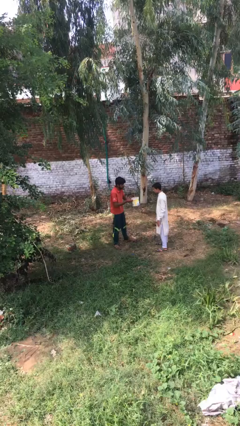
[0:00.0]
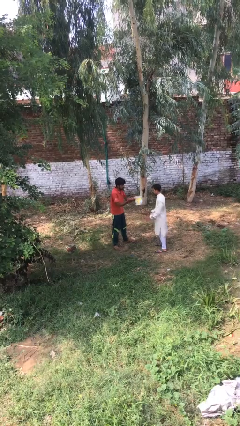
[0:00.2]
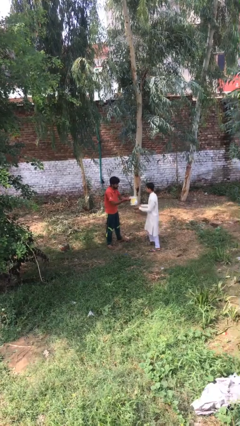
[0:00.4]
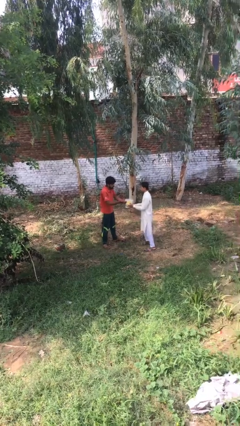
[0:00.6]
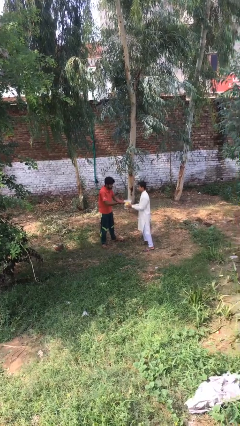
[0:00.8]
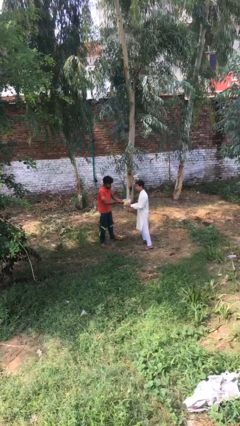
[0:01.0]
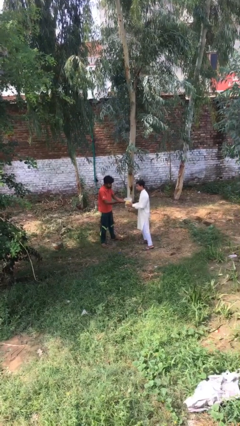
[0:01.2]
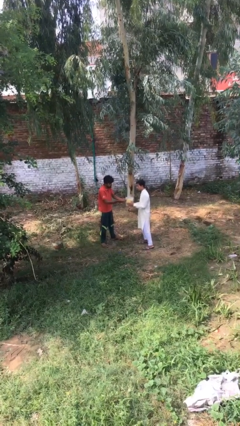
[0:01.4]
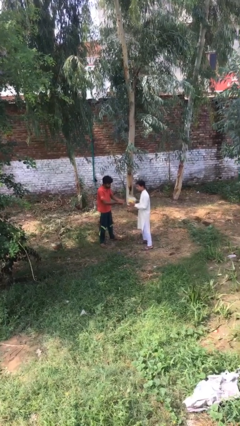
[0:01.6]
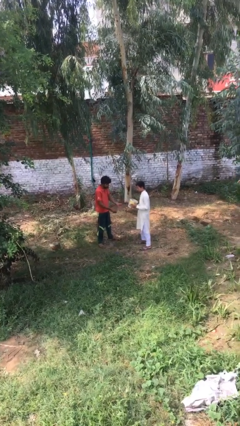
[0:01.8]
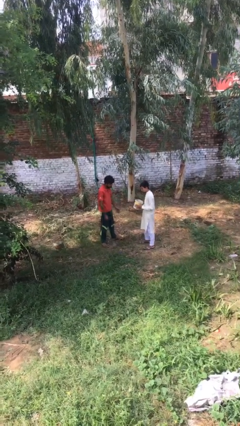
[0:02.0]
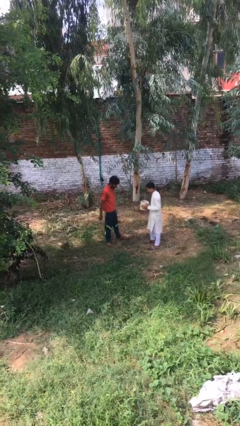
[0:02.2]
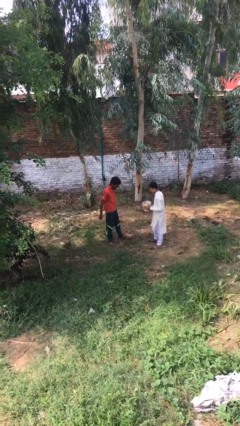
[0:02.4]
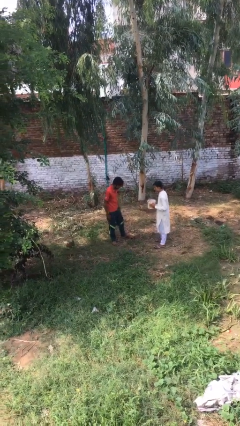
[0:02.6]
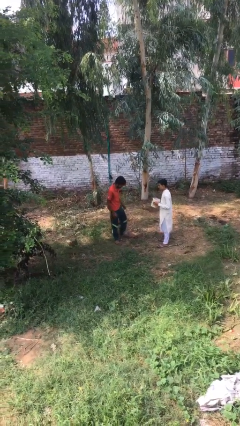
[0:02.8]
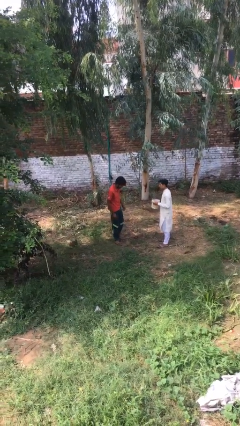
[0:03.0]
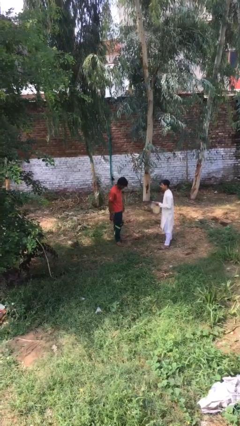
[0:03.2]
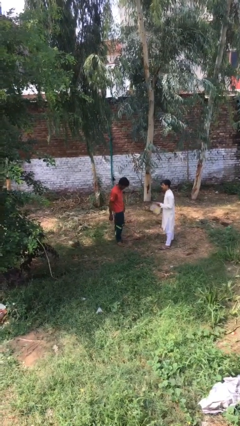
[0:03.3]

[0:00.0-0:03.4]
person transfers object to person

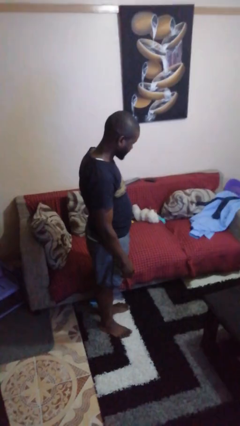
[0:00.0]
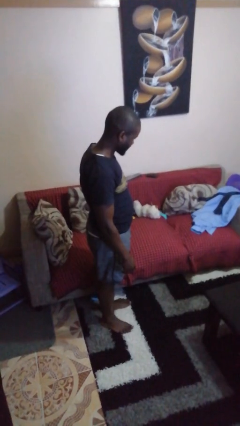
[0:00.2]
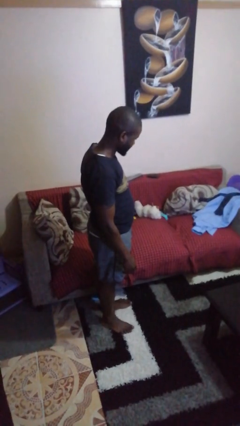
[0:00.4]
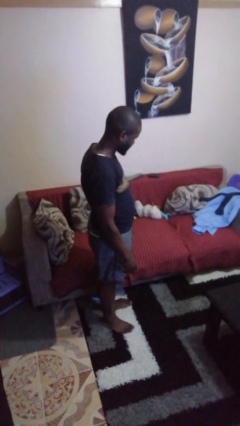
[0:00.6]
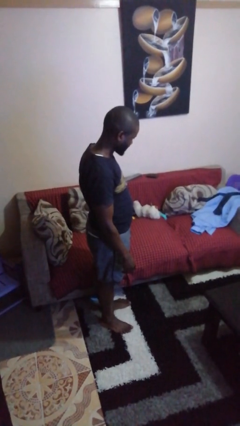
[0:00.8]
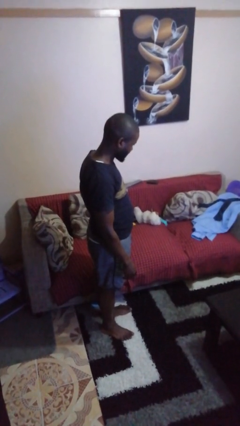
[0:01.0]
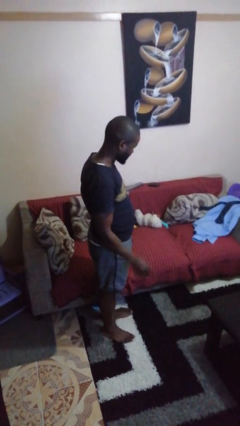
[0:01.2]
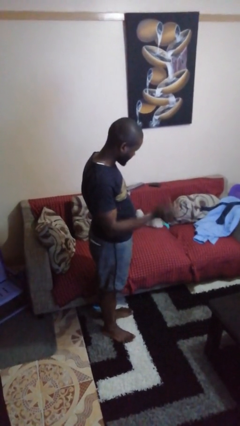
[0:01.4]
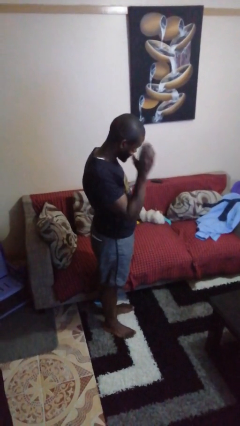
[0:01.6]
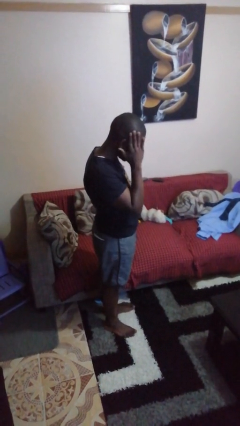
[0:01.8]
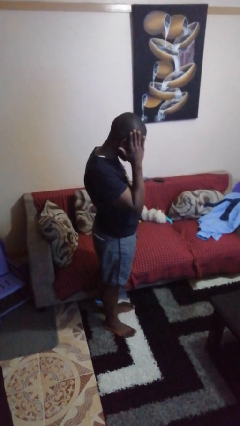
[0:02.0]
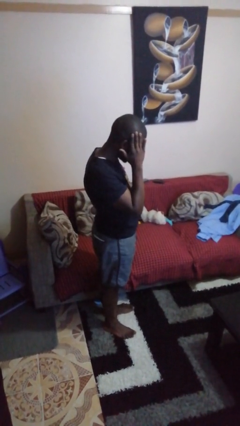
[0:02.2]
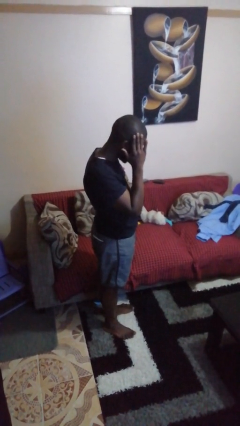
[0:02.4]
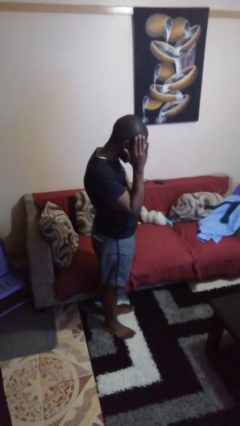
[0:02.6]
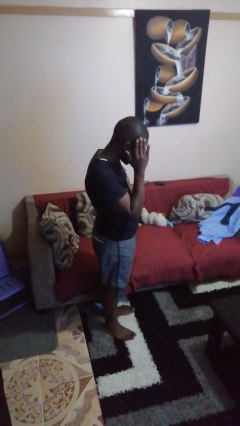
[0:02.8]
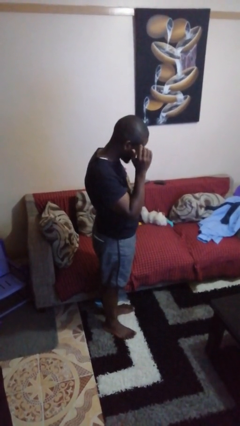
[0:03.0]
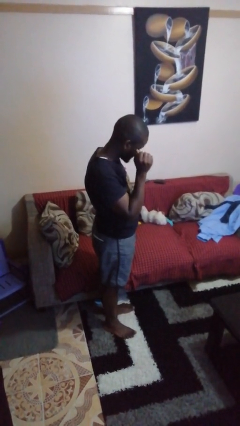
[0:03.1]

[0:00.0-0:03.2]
person pats head

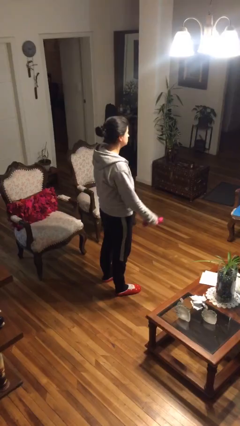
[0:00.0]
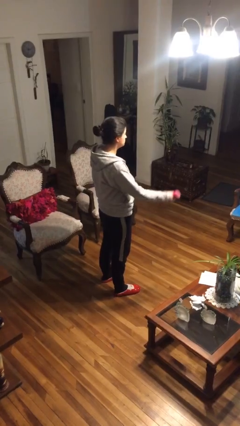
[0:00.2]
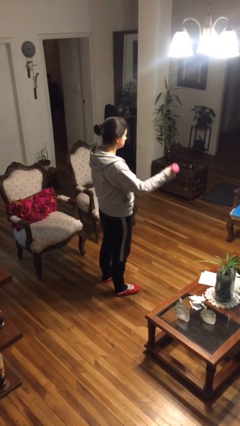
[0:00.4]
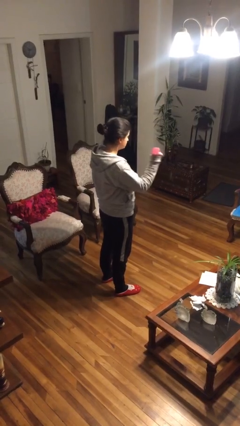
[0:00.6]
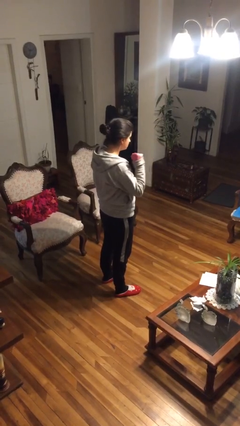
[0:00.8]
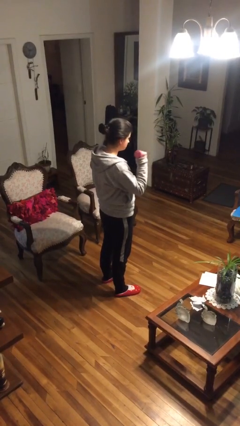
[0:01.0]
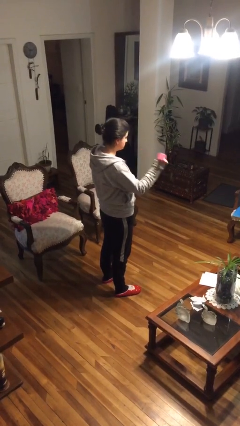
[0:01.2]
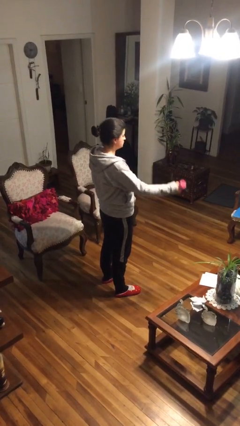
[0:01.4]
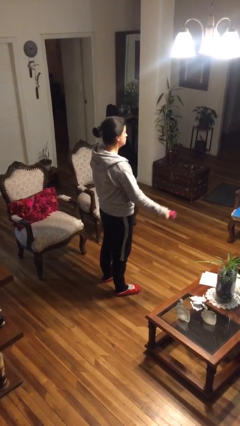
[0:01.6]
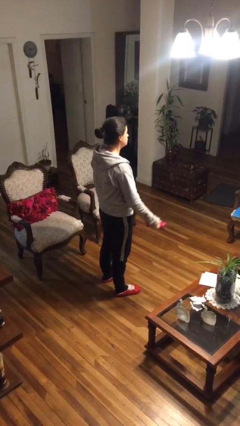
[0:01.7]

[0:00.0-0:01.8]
person lifts dumbbells

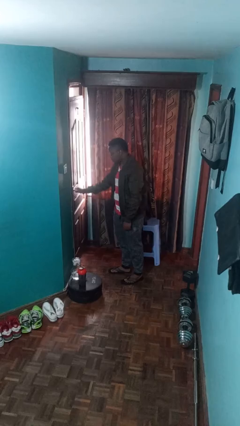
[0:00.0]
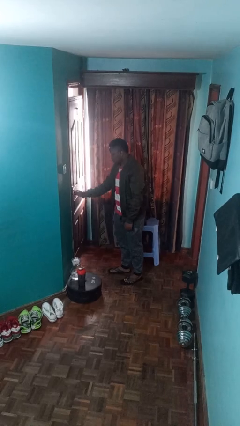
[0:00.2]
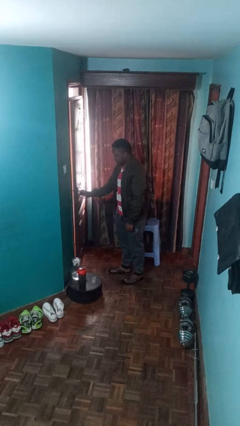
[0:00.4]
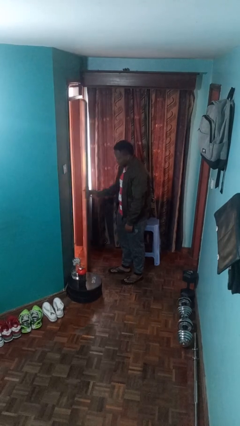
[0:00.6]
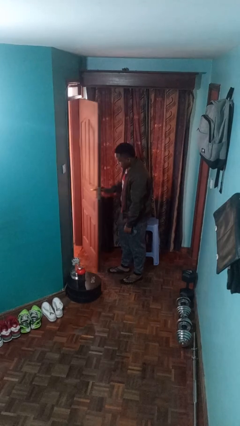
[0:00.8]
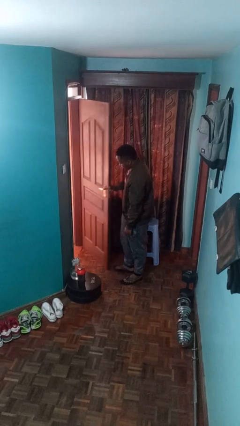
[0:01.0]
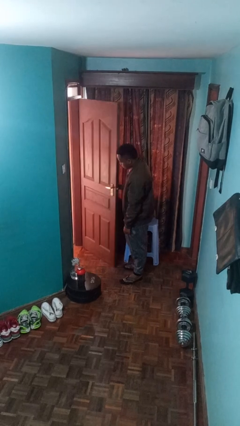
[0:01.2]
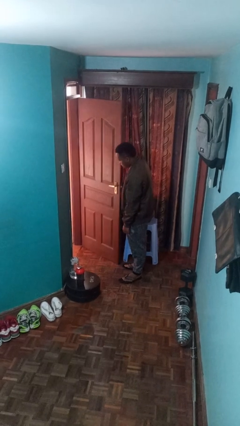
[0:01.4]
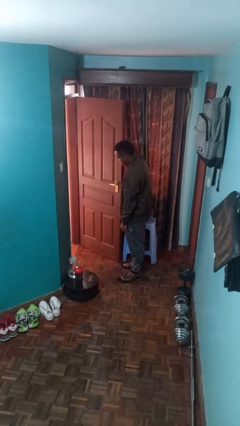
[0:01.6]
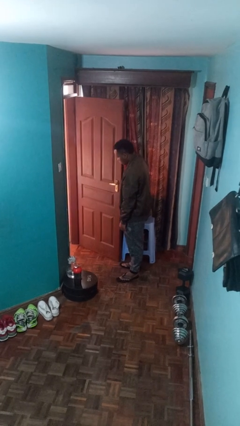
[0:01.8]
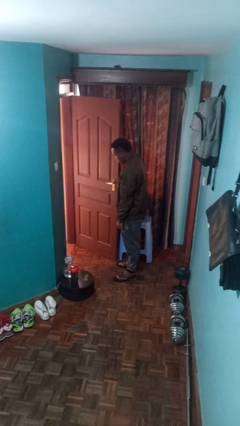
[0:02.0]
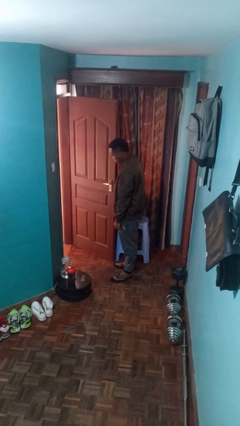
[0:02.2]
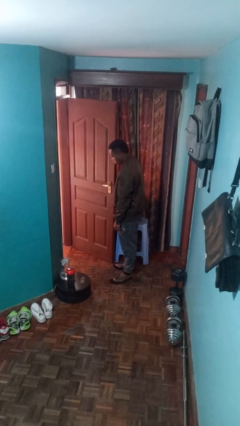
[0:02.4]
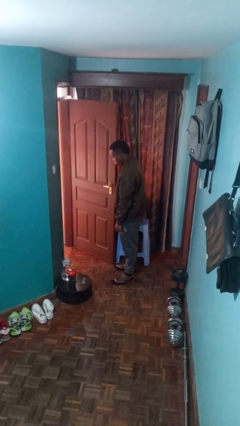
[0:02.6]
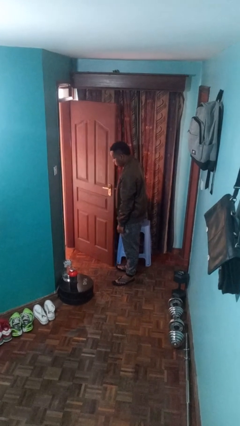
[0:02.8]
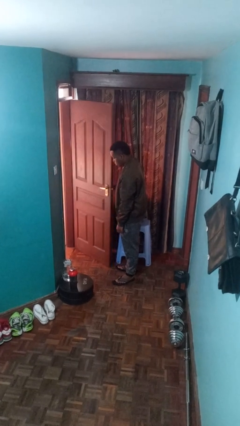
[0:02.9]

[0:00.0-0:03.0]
person opens facility door

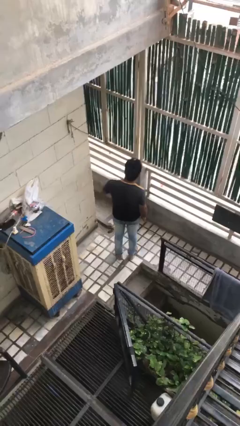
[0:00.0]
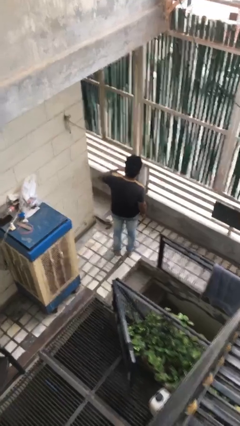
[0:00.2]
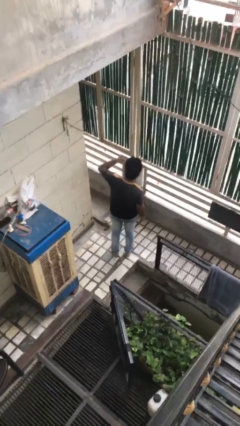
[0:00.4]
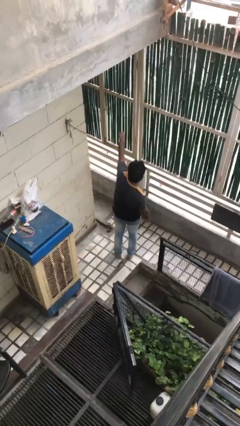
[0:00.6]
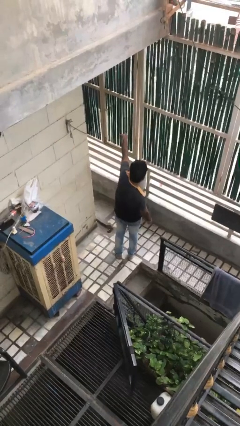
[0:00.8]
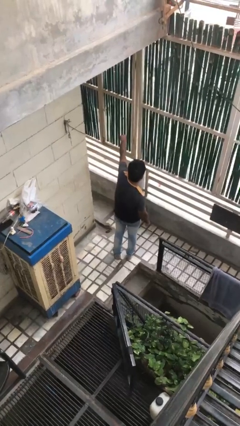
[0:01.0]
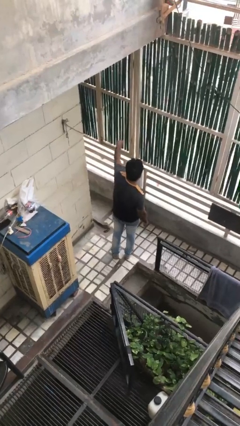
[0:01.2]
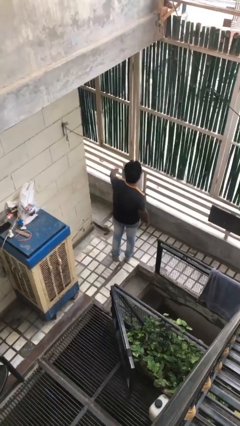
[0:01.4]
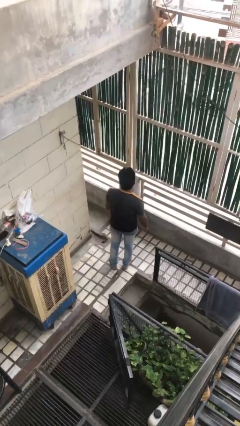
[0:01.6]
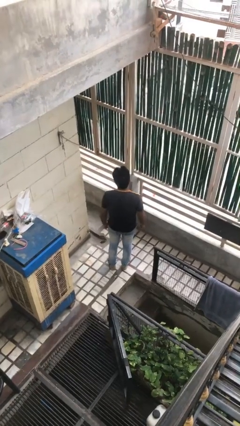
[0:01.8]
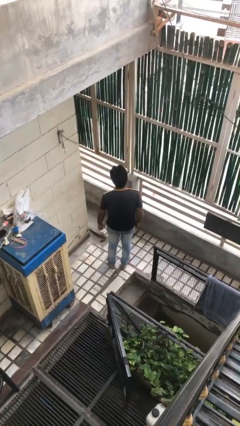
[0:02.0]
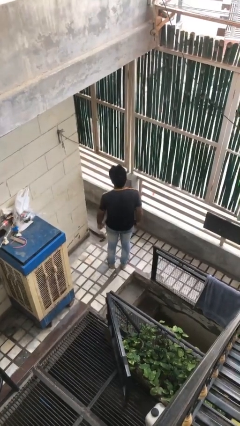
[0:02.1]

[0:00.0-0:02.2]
person punches

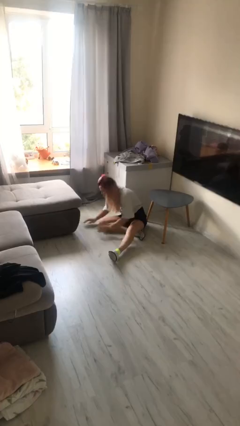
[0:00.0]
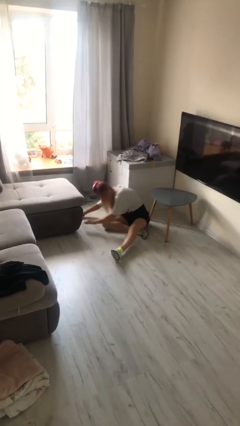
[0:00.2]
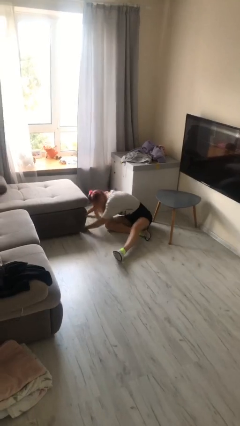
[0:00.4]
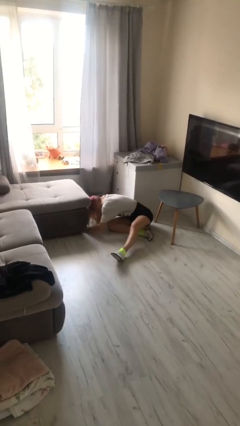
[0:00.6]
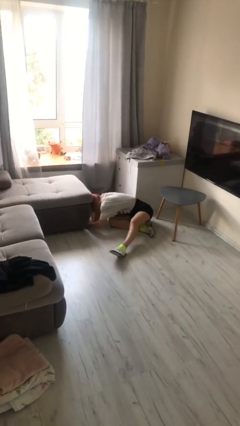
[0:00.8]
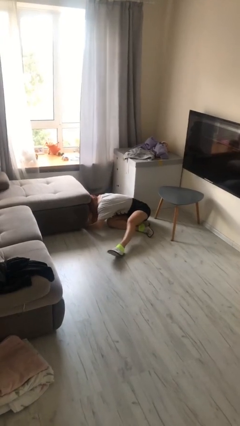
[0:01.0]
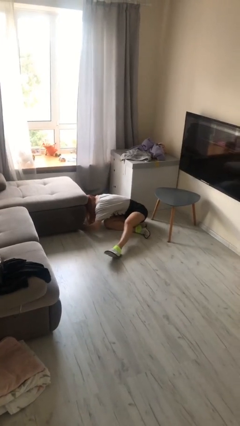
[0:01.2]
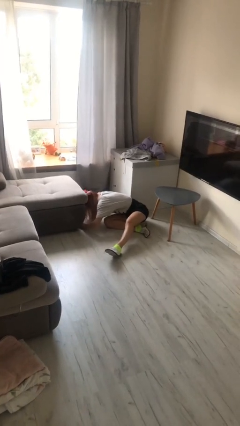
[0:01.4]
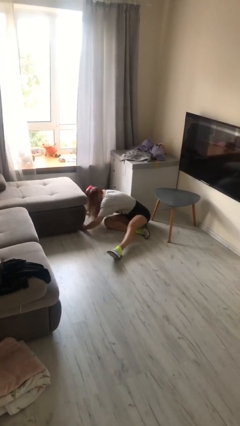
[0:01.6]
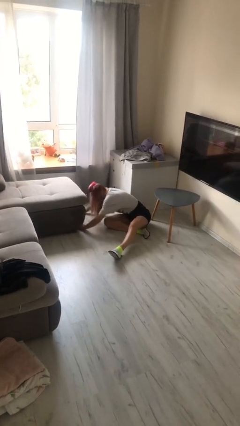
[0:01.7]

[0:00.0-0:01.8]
person searches under couch

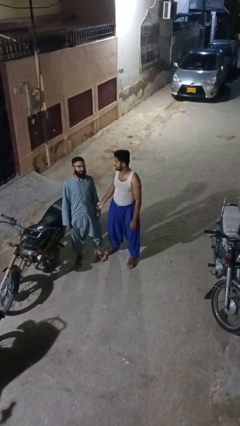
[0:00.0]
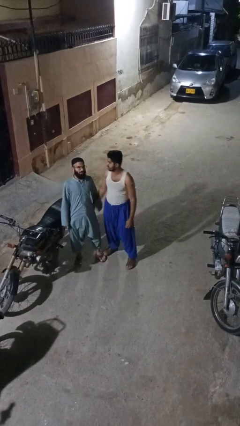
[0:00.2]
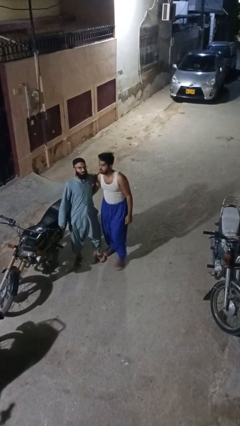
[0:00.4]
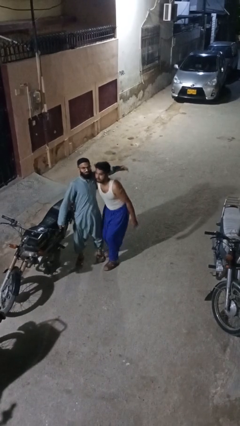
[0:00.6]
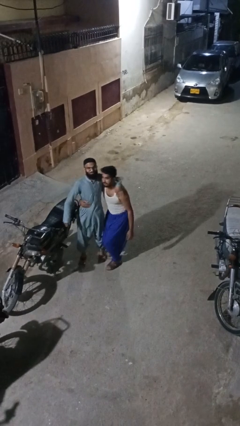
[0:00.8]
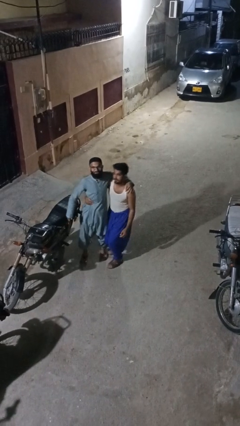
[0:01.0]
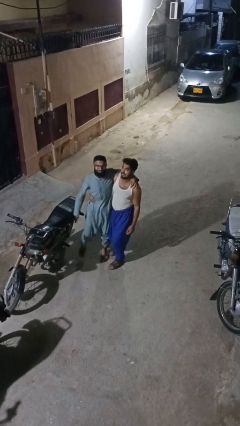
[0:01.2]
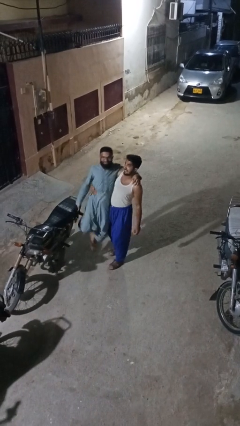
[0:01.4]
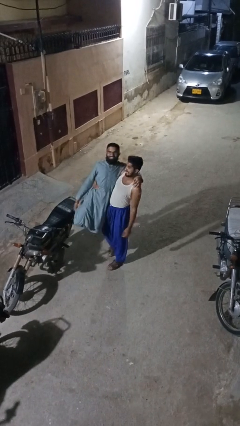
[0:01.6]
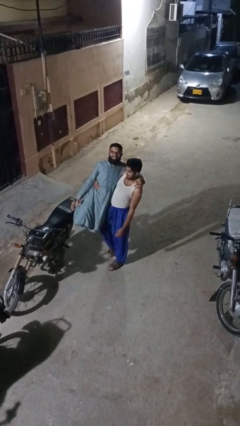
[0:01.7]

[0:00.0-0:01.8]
person picks up person
